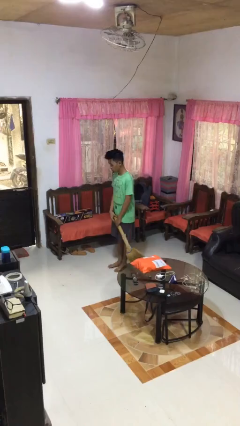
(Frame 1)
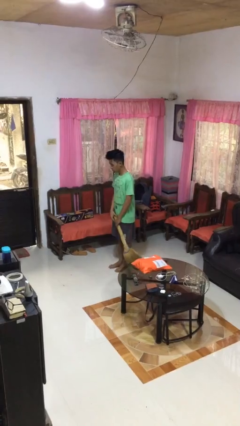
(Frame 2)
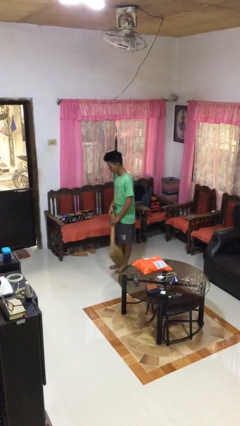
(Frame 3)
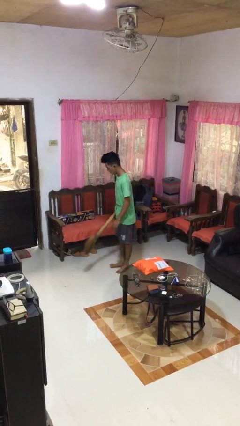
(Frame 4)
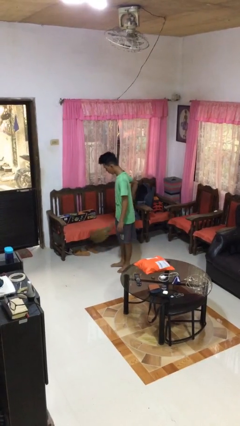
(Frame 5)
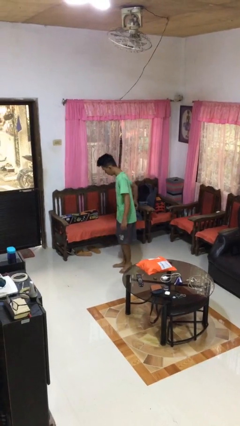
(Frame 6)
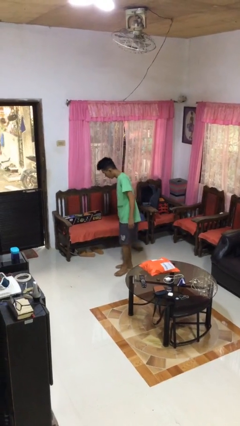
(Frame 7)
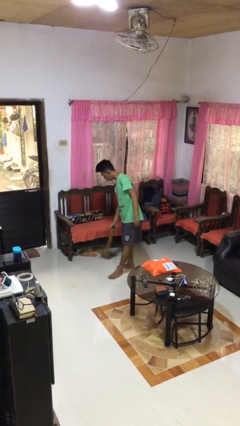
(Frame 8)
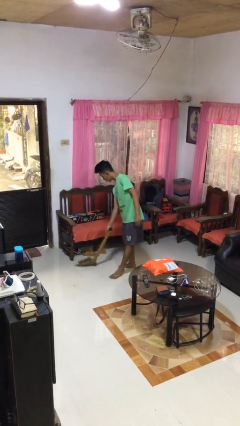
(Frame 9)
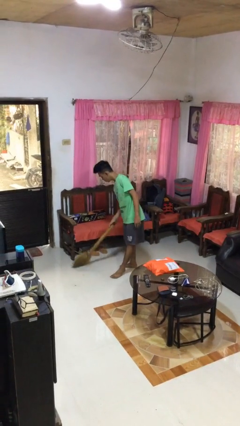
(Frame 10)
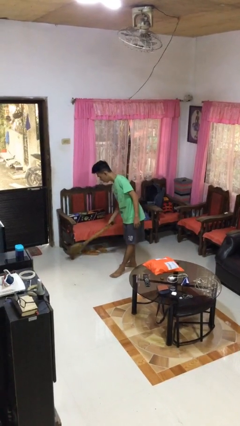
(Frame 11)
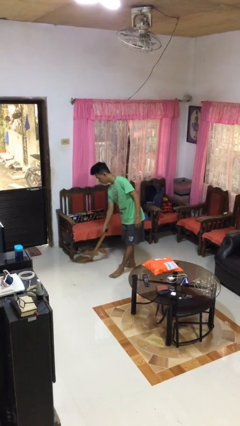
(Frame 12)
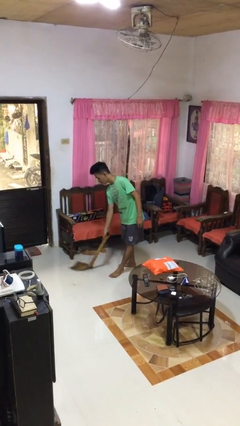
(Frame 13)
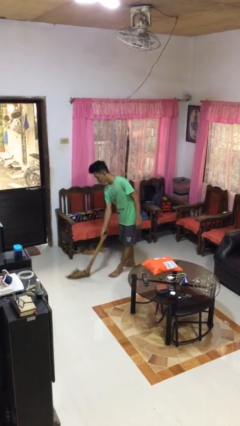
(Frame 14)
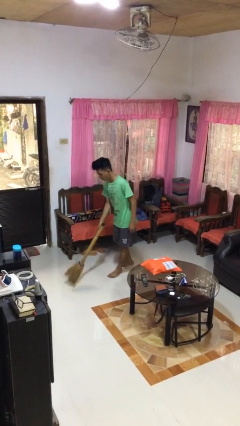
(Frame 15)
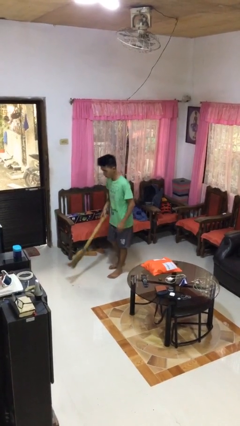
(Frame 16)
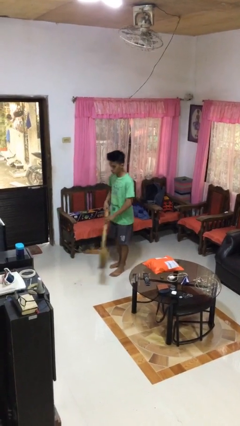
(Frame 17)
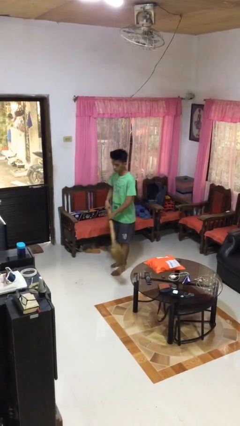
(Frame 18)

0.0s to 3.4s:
person sweeps floor

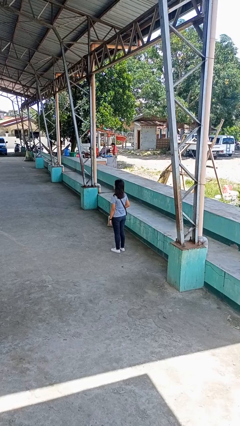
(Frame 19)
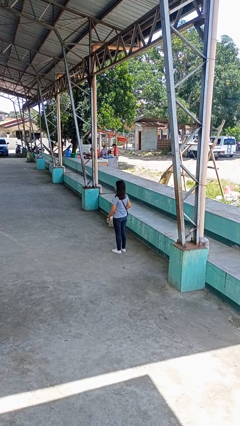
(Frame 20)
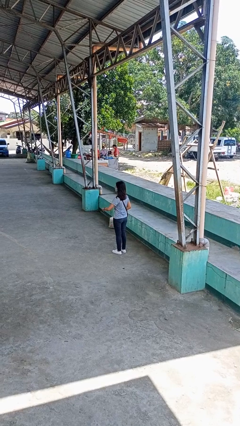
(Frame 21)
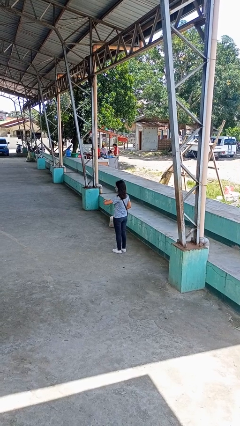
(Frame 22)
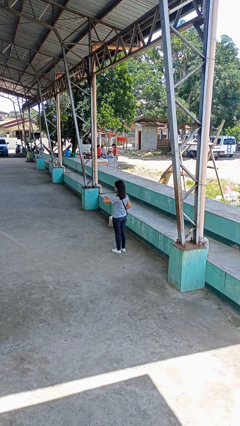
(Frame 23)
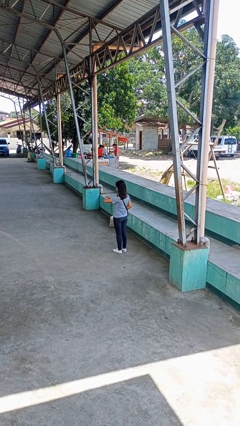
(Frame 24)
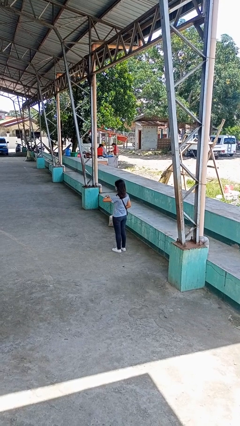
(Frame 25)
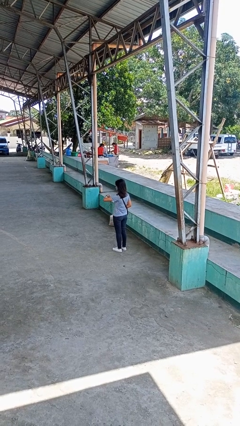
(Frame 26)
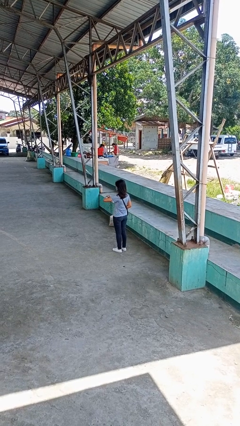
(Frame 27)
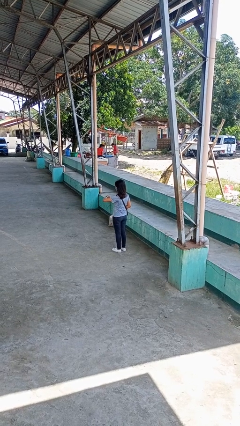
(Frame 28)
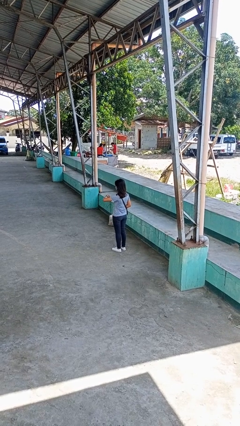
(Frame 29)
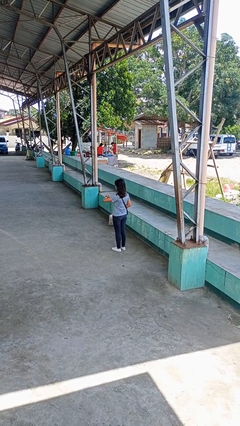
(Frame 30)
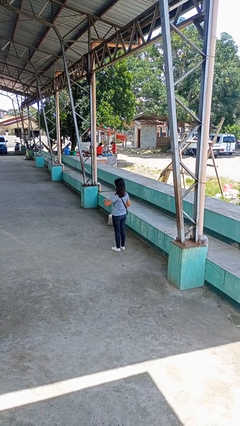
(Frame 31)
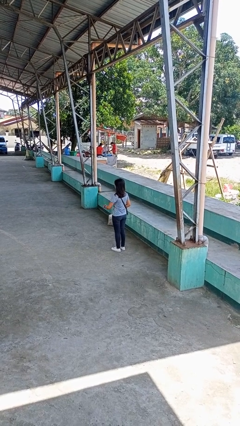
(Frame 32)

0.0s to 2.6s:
person looks at wristwatch

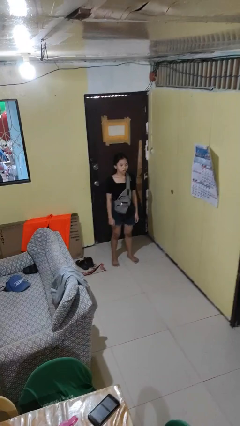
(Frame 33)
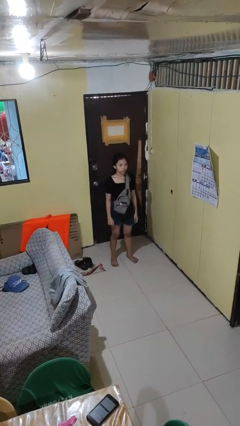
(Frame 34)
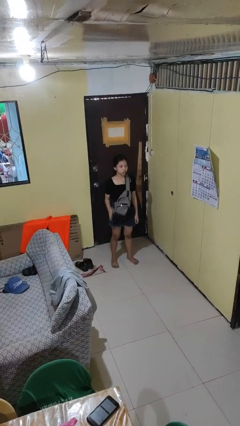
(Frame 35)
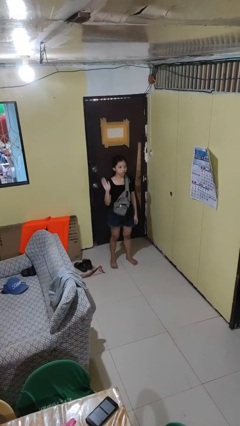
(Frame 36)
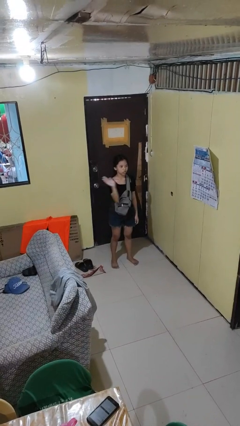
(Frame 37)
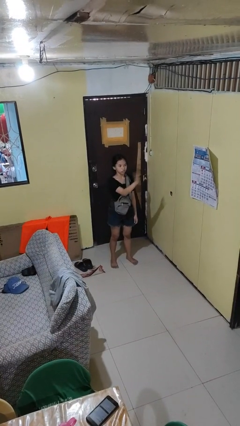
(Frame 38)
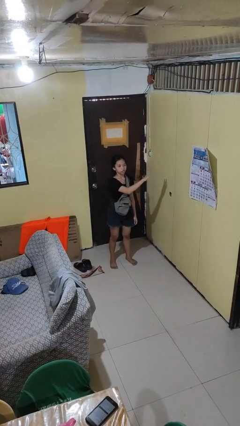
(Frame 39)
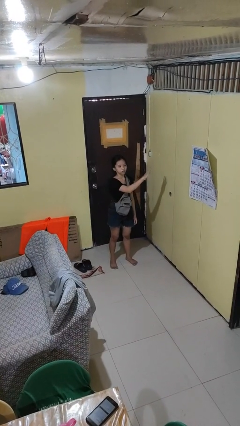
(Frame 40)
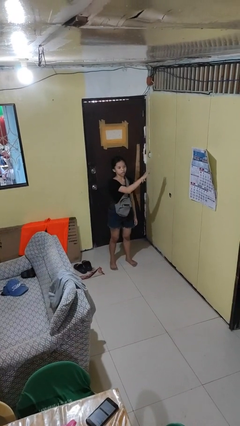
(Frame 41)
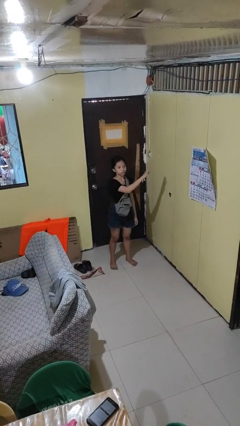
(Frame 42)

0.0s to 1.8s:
person gestures swipe left

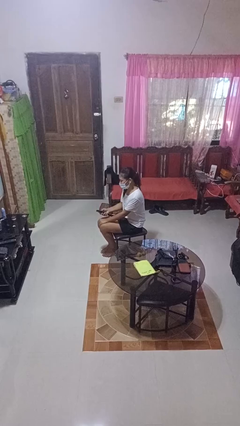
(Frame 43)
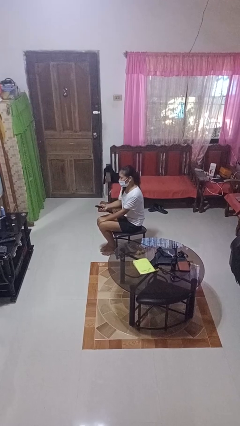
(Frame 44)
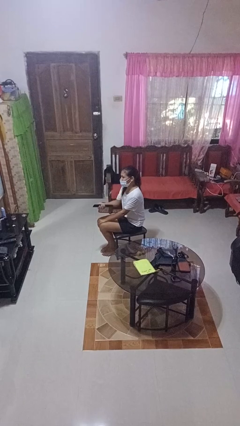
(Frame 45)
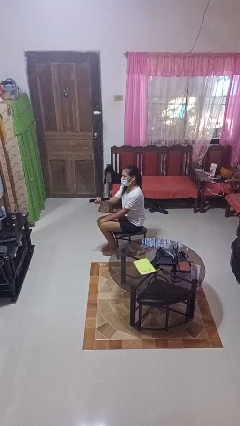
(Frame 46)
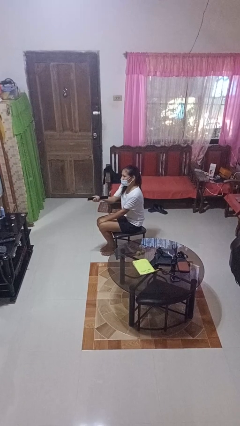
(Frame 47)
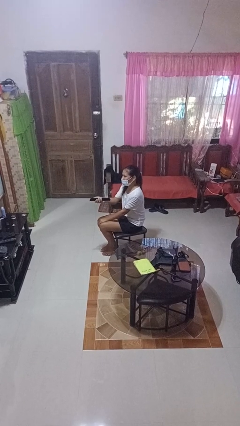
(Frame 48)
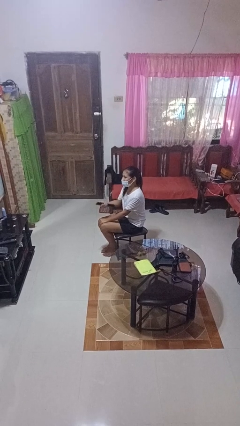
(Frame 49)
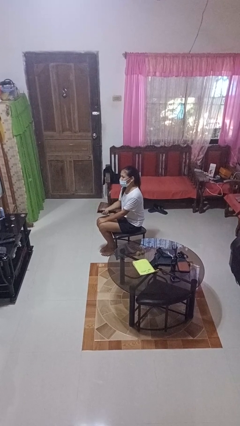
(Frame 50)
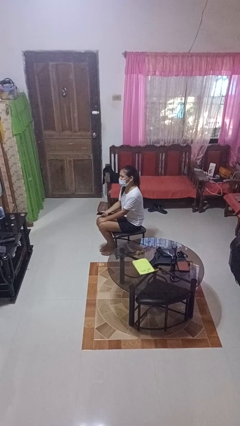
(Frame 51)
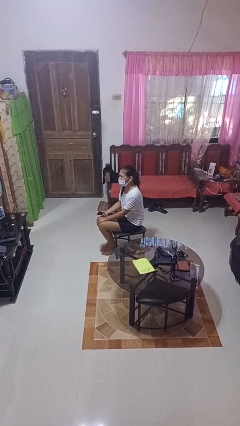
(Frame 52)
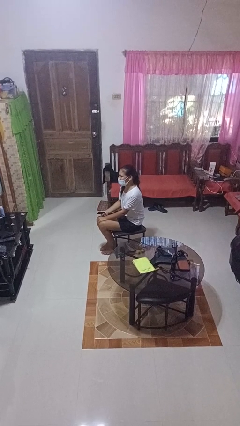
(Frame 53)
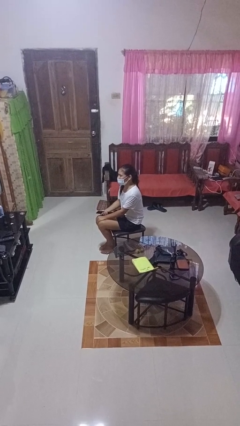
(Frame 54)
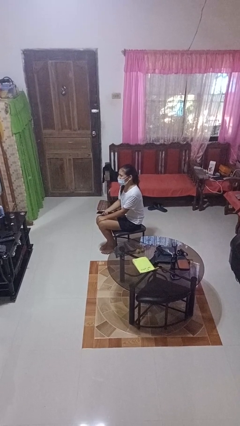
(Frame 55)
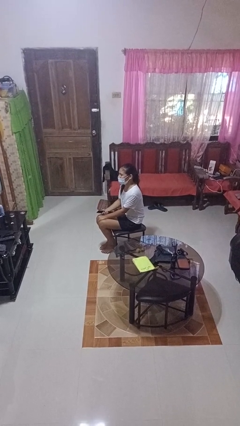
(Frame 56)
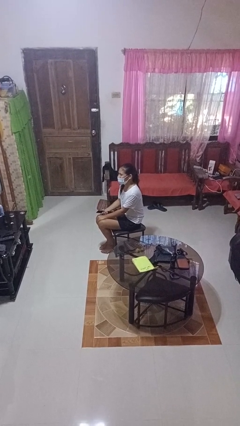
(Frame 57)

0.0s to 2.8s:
person uses television remote

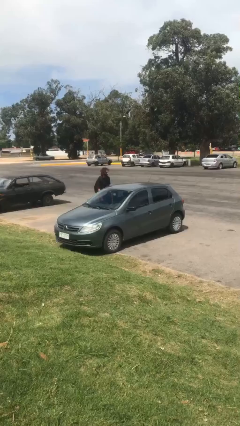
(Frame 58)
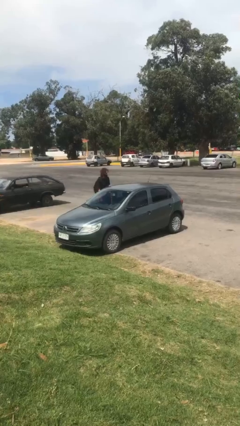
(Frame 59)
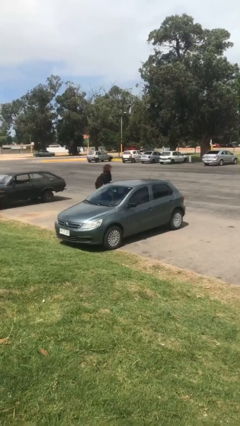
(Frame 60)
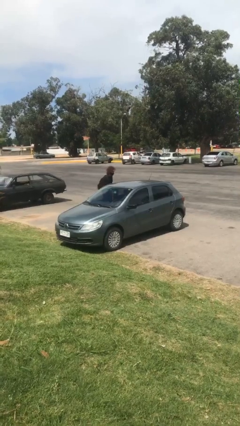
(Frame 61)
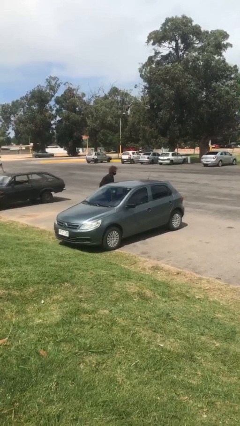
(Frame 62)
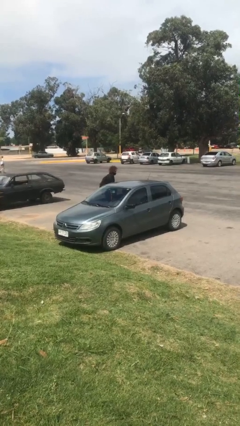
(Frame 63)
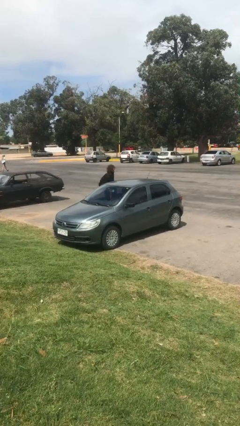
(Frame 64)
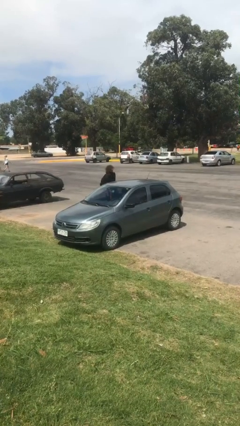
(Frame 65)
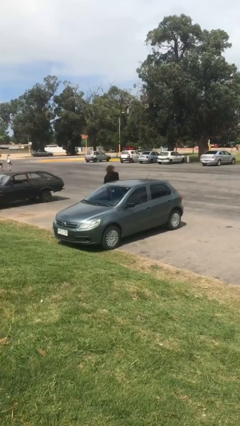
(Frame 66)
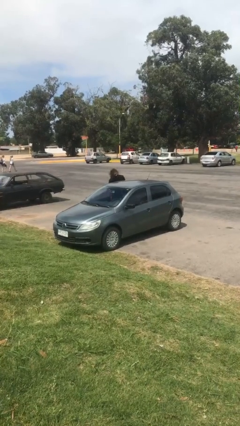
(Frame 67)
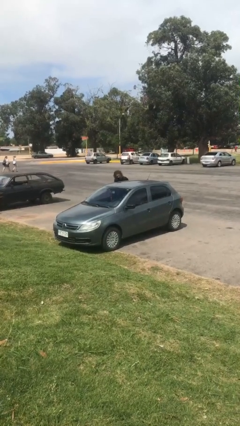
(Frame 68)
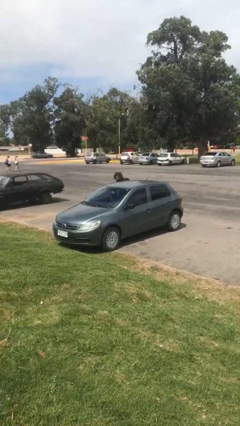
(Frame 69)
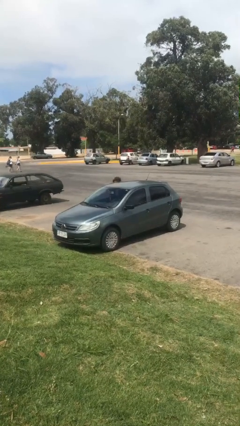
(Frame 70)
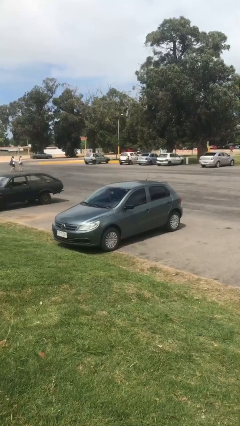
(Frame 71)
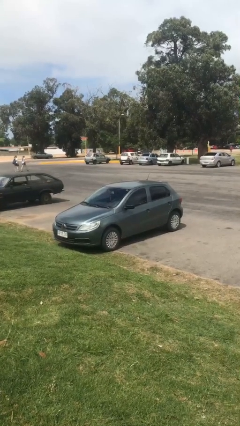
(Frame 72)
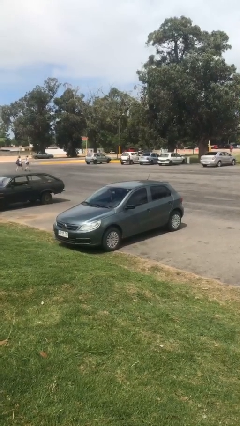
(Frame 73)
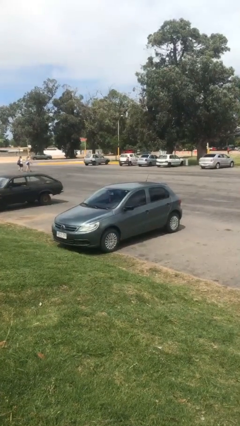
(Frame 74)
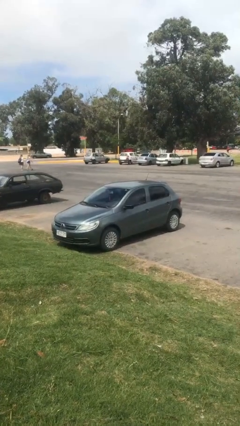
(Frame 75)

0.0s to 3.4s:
car picks up person

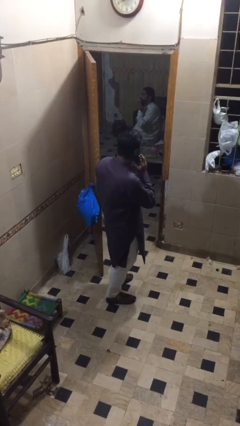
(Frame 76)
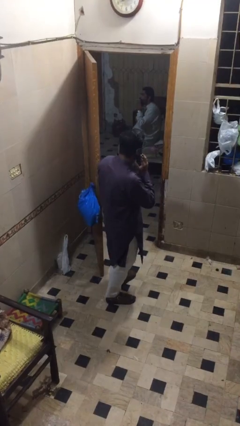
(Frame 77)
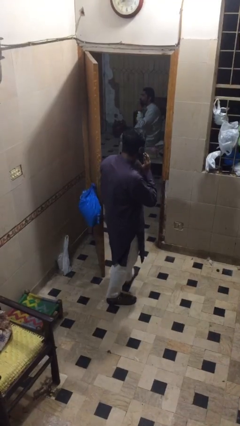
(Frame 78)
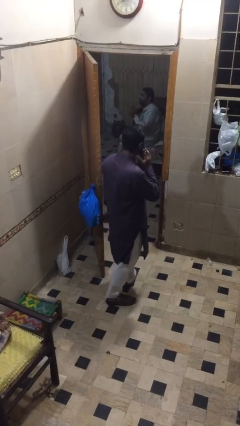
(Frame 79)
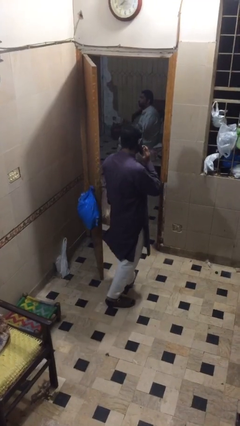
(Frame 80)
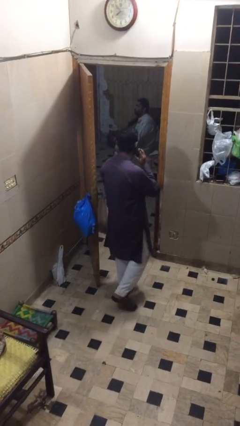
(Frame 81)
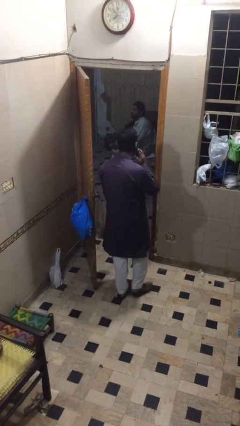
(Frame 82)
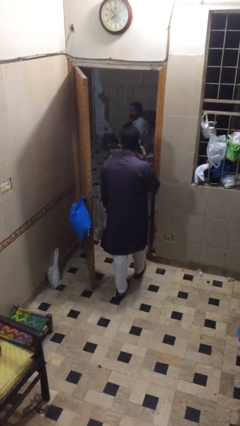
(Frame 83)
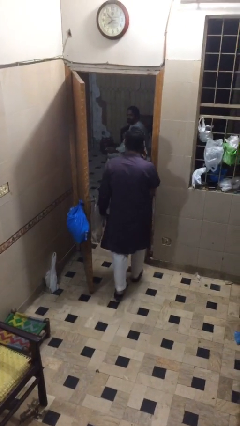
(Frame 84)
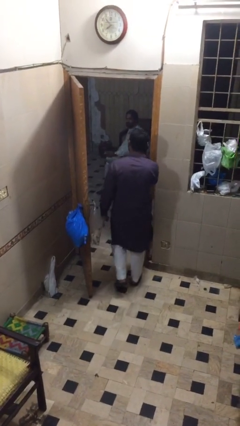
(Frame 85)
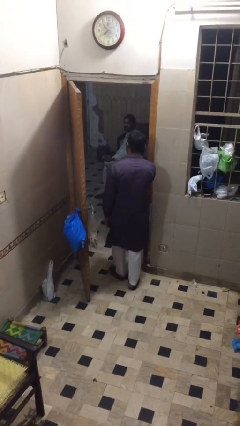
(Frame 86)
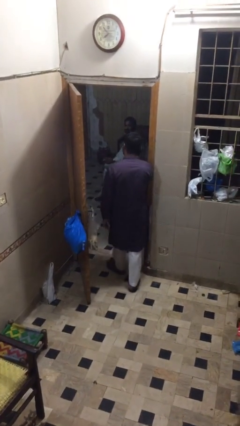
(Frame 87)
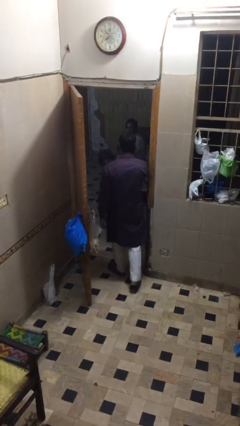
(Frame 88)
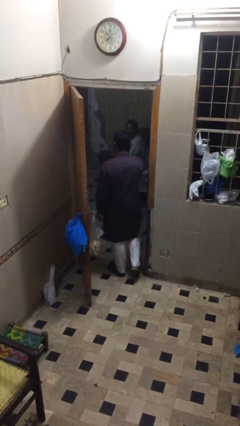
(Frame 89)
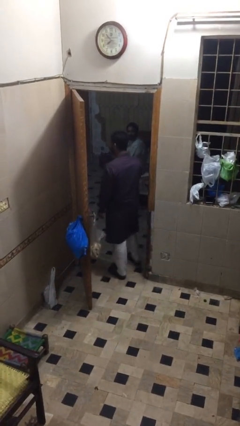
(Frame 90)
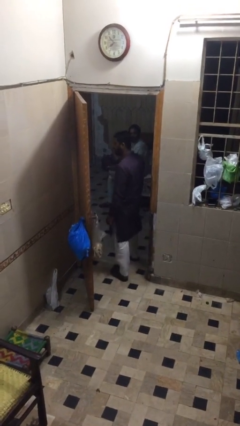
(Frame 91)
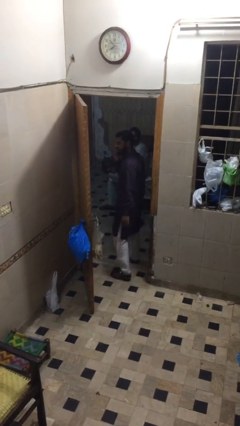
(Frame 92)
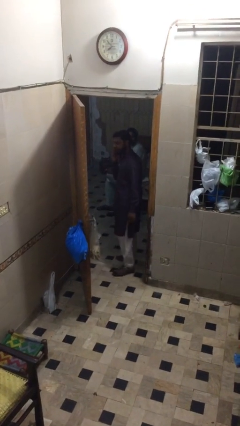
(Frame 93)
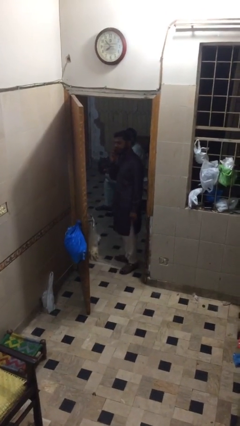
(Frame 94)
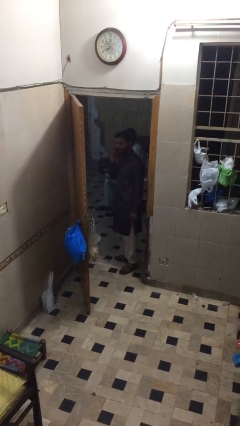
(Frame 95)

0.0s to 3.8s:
person exits scene through structure
